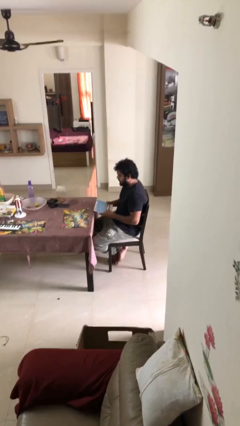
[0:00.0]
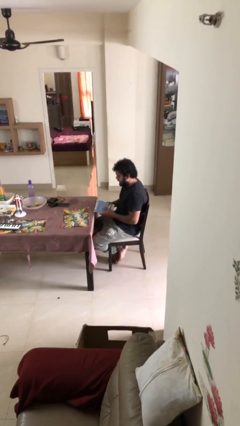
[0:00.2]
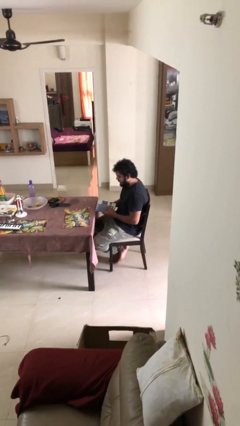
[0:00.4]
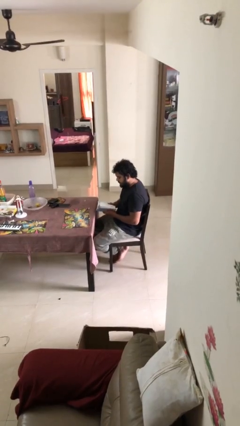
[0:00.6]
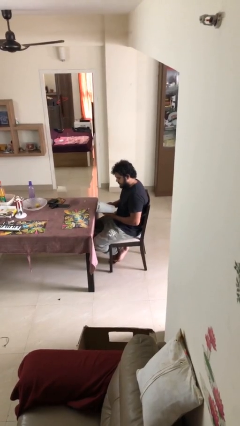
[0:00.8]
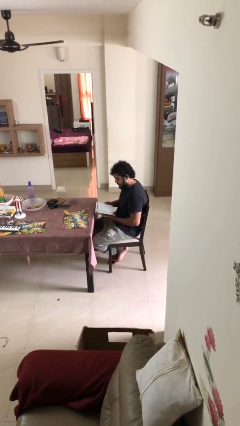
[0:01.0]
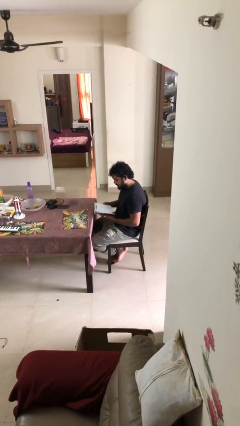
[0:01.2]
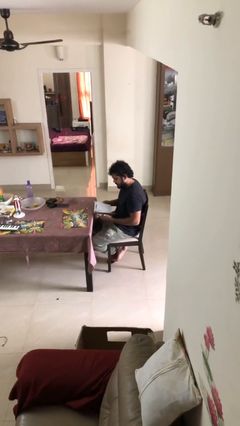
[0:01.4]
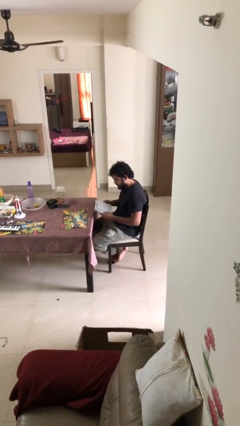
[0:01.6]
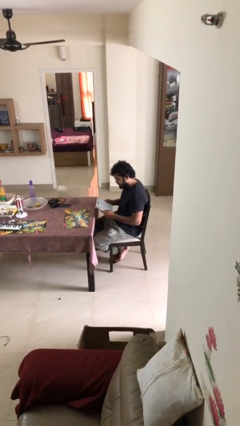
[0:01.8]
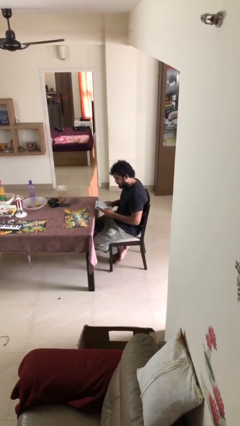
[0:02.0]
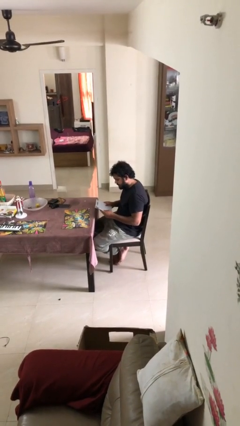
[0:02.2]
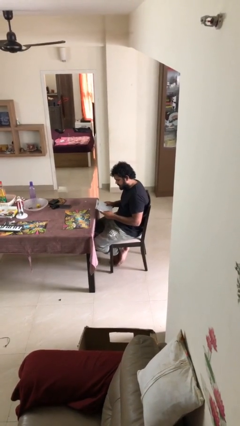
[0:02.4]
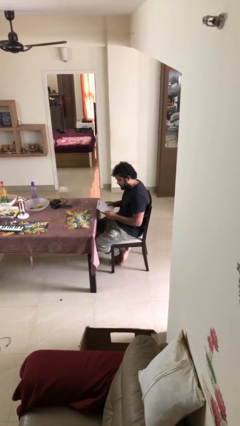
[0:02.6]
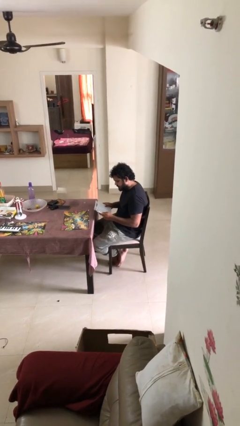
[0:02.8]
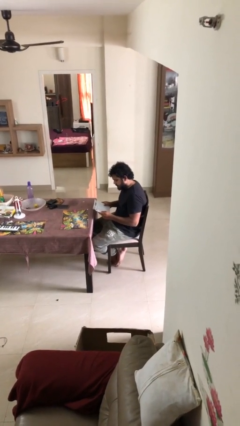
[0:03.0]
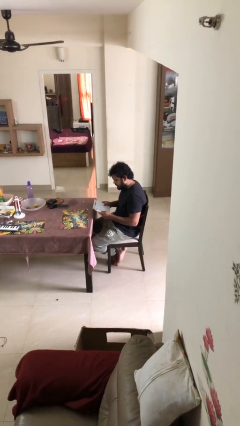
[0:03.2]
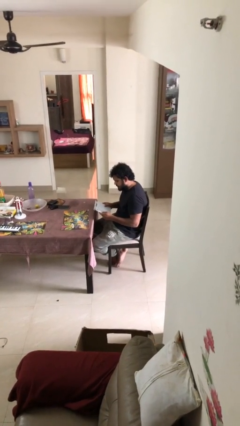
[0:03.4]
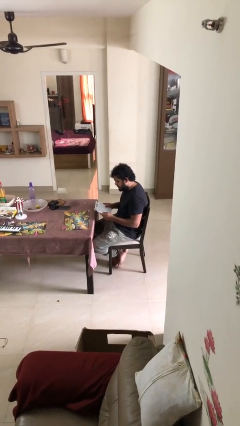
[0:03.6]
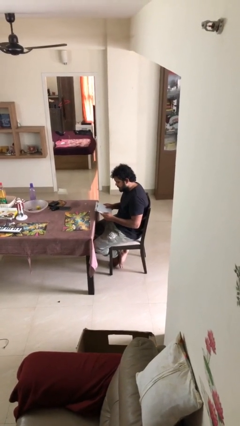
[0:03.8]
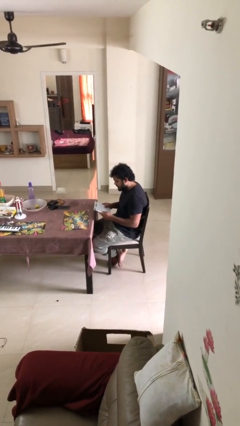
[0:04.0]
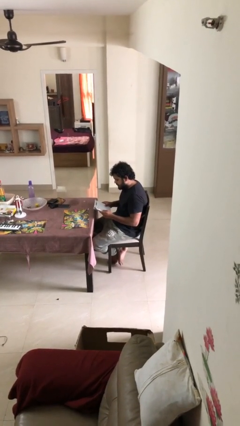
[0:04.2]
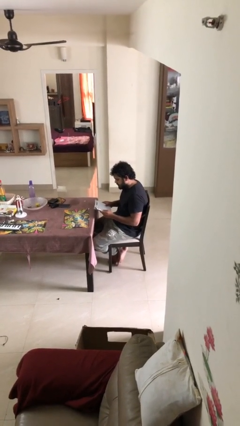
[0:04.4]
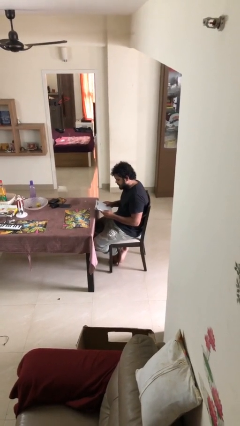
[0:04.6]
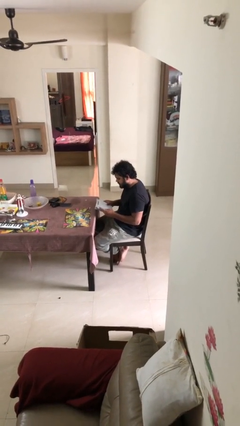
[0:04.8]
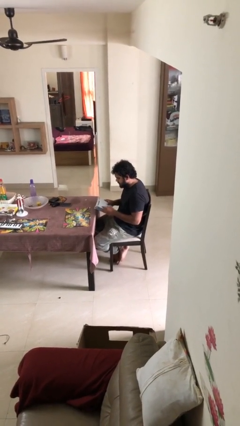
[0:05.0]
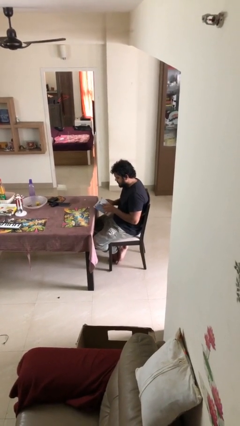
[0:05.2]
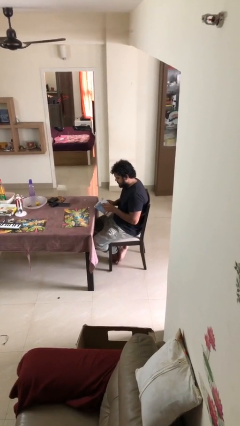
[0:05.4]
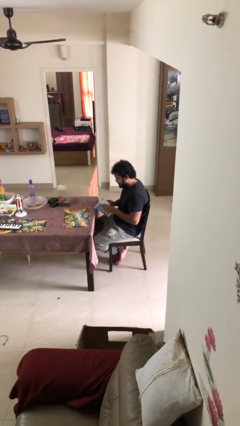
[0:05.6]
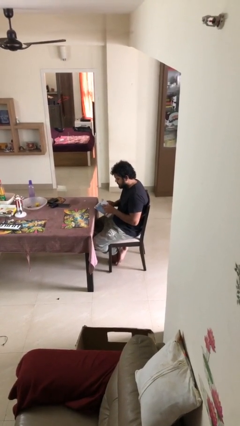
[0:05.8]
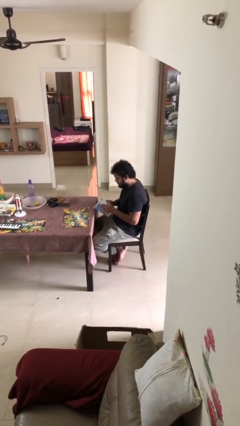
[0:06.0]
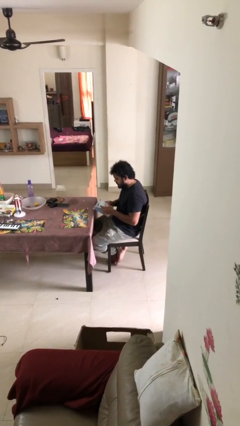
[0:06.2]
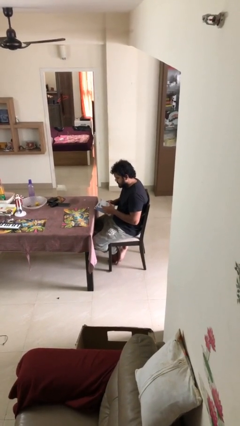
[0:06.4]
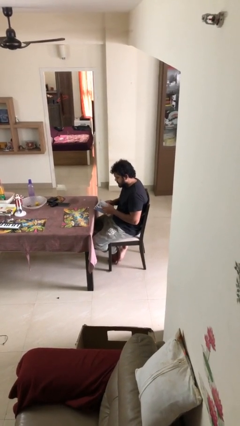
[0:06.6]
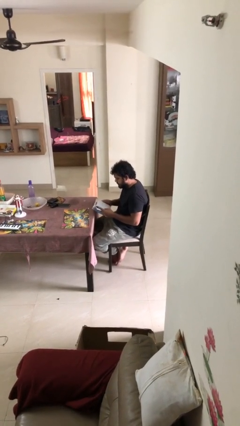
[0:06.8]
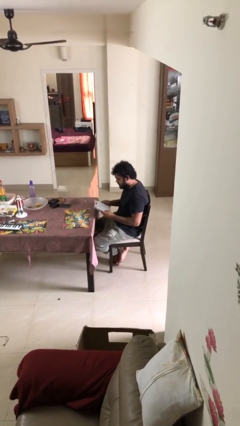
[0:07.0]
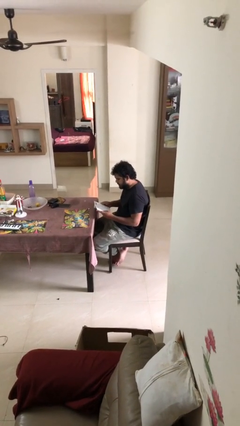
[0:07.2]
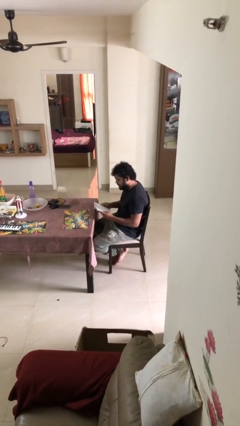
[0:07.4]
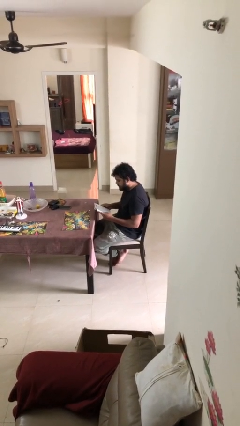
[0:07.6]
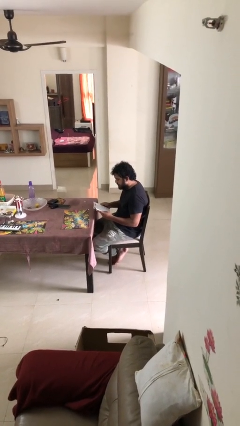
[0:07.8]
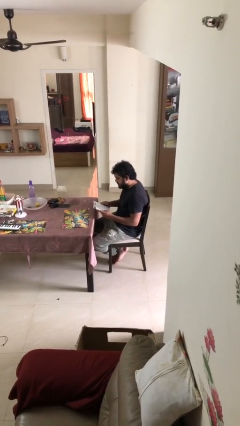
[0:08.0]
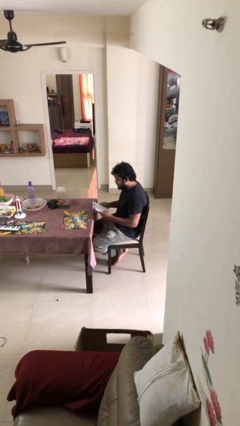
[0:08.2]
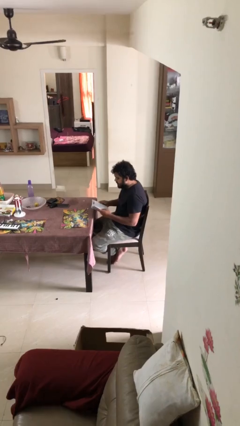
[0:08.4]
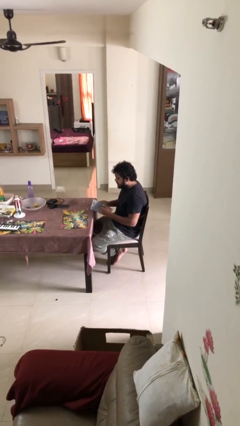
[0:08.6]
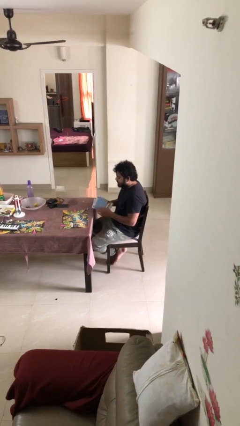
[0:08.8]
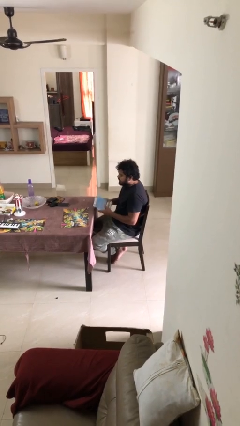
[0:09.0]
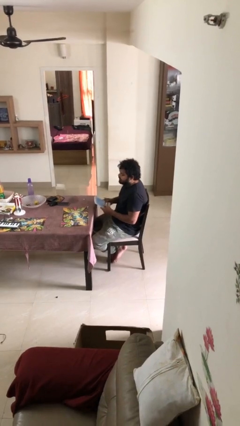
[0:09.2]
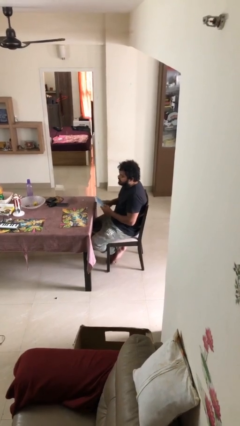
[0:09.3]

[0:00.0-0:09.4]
person reads document

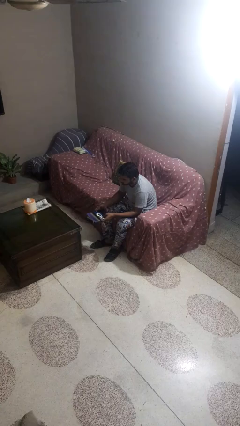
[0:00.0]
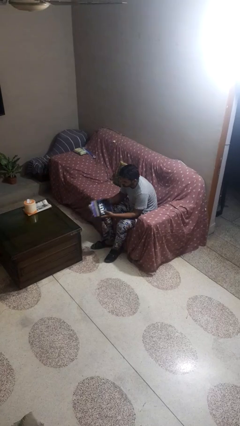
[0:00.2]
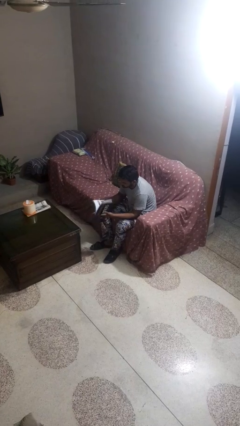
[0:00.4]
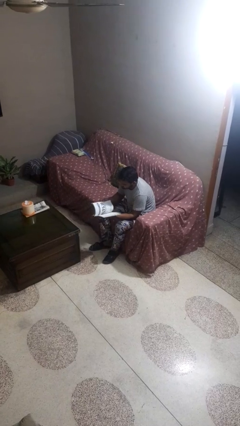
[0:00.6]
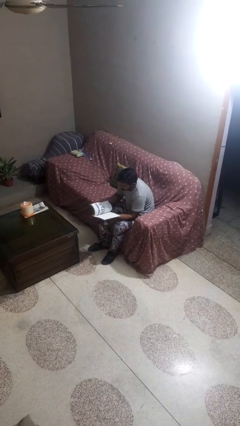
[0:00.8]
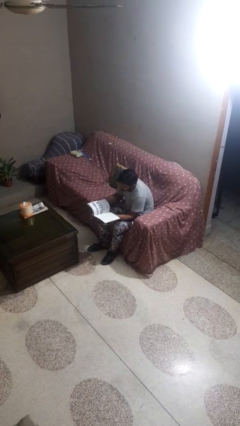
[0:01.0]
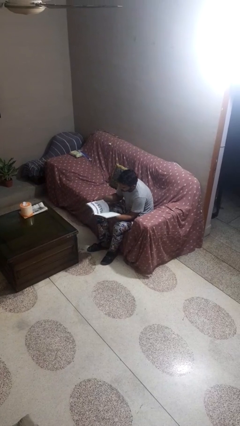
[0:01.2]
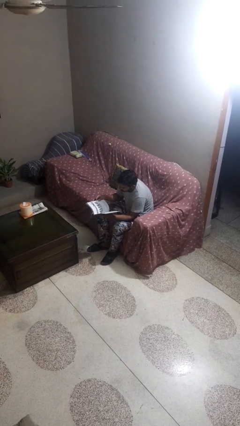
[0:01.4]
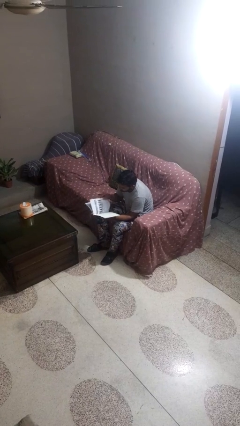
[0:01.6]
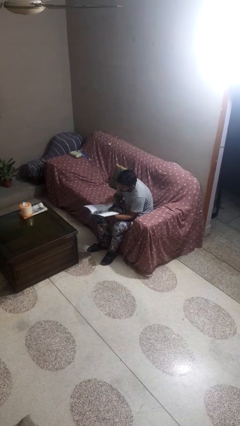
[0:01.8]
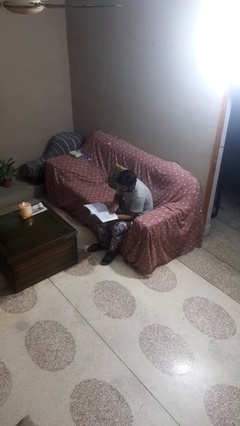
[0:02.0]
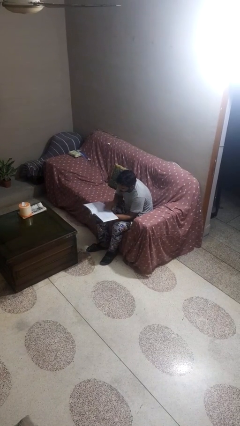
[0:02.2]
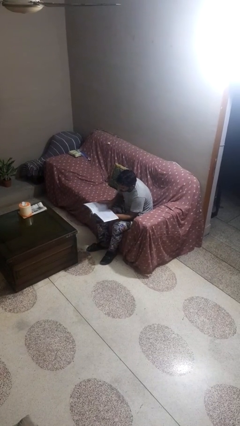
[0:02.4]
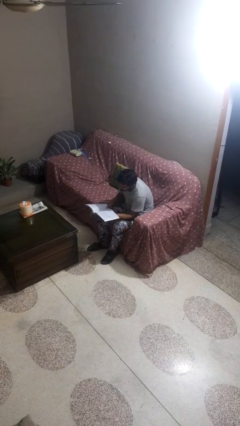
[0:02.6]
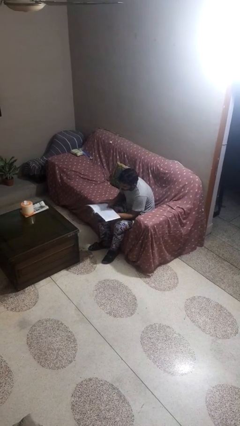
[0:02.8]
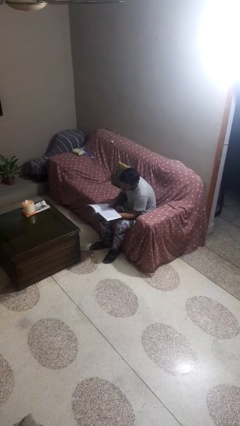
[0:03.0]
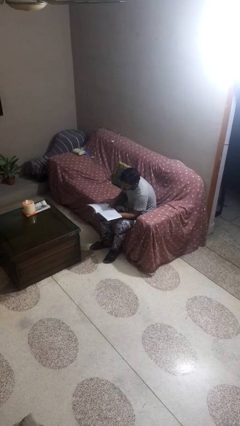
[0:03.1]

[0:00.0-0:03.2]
person reads book

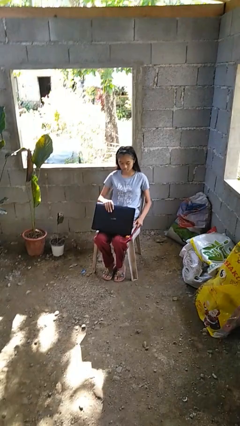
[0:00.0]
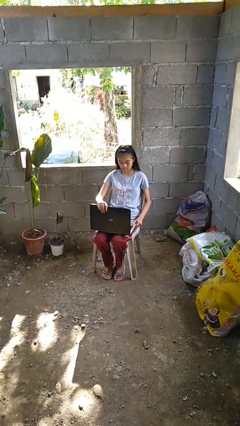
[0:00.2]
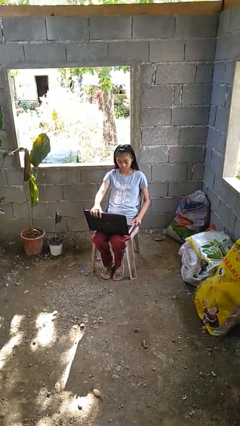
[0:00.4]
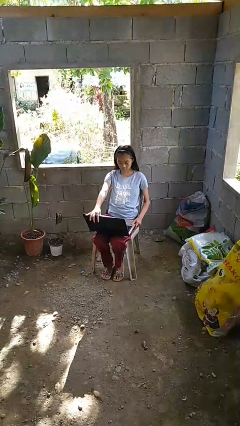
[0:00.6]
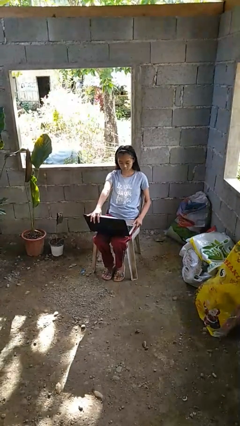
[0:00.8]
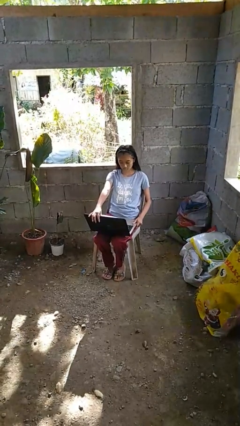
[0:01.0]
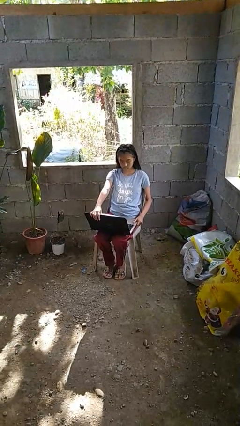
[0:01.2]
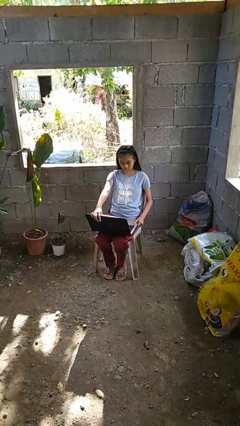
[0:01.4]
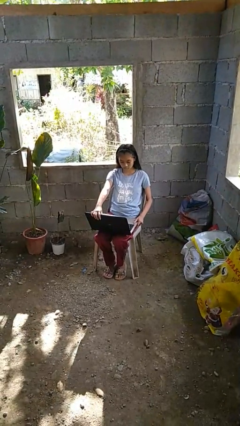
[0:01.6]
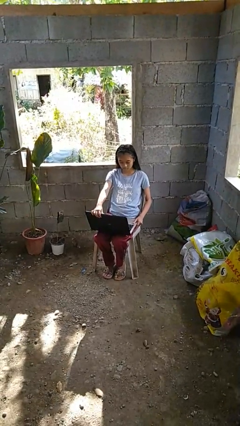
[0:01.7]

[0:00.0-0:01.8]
person opens laptop

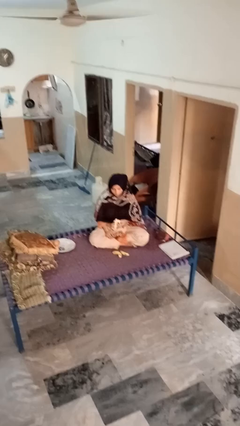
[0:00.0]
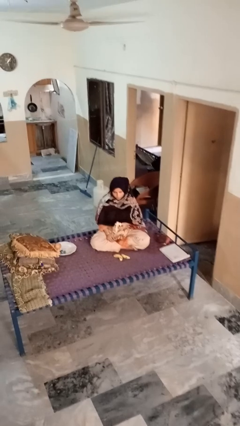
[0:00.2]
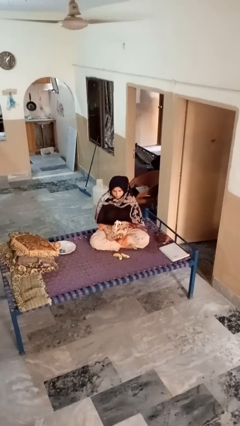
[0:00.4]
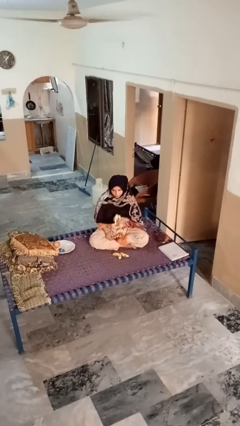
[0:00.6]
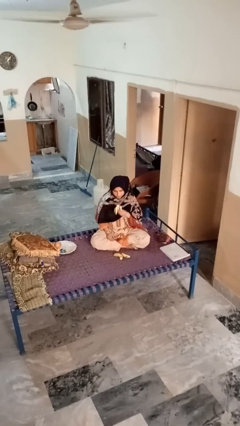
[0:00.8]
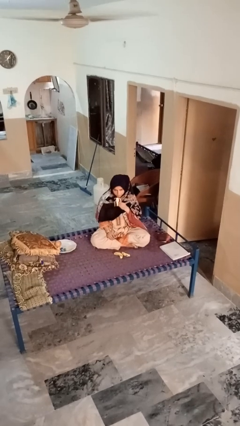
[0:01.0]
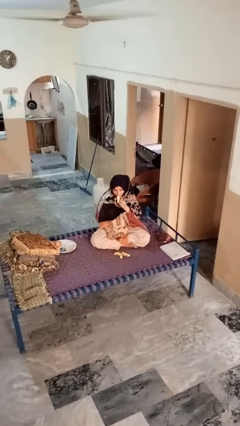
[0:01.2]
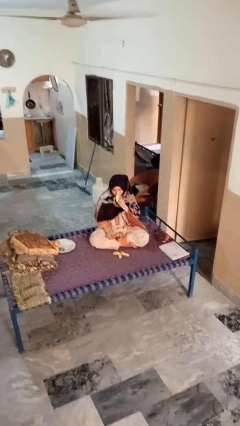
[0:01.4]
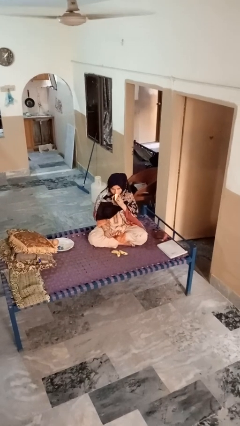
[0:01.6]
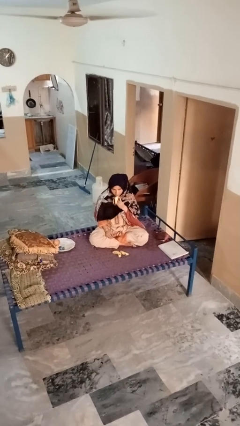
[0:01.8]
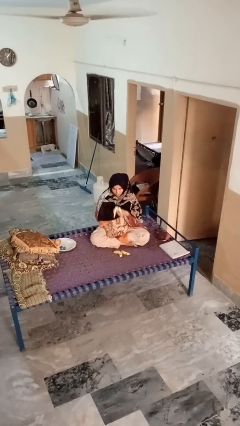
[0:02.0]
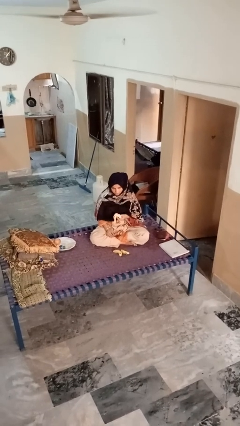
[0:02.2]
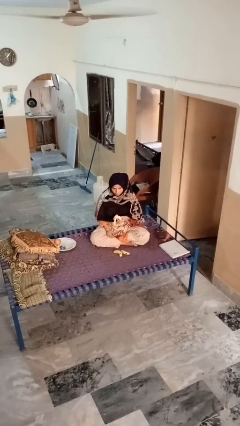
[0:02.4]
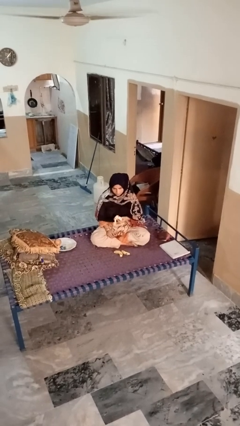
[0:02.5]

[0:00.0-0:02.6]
person eats banana

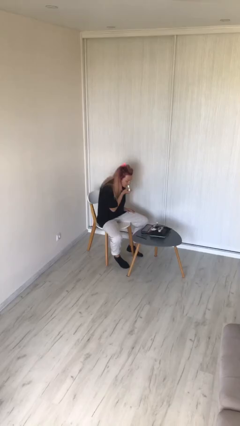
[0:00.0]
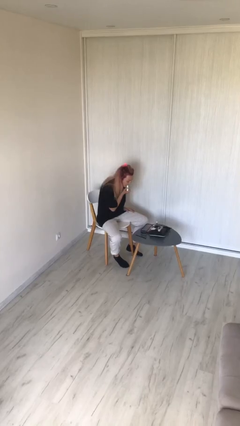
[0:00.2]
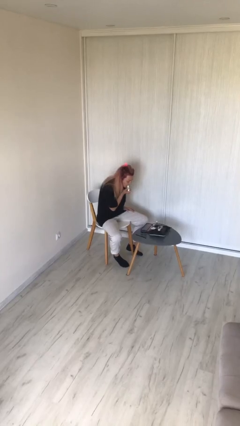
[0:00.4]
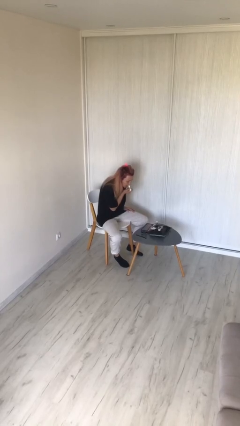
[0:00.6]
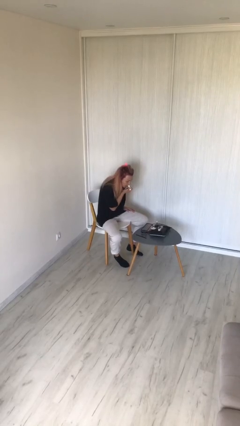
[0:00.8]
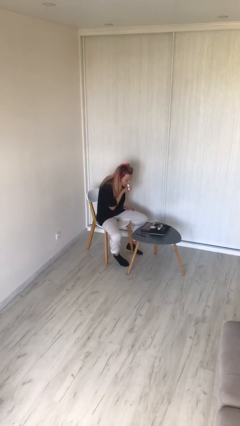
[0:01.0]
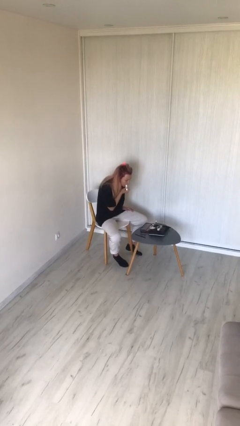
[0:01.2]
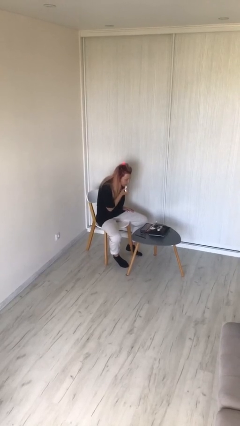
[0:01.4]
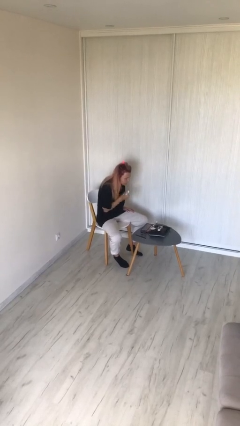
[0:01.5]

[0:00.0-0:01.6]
person applies lip makeup
